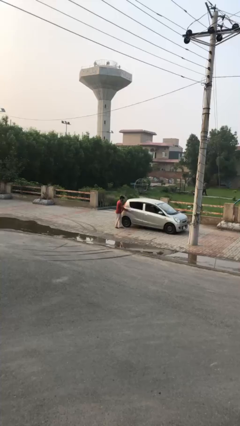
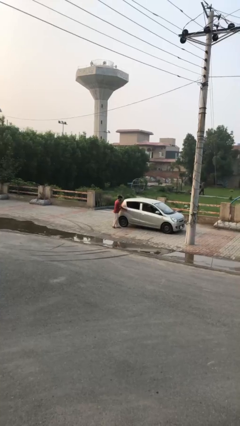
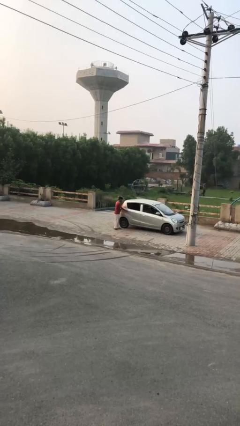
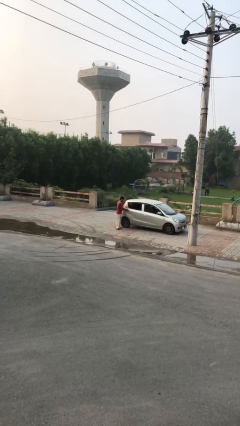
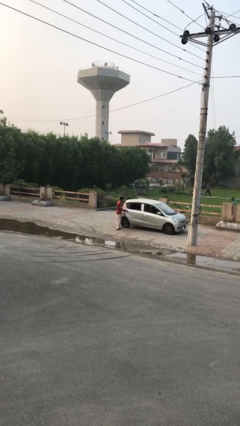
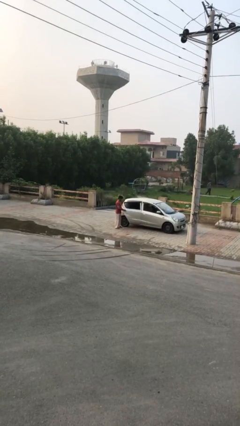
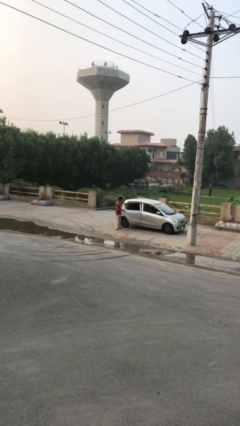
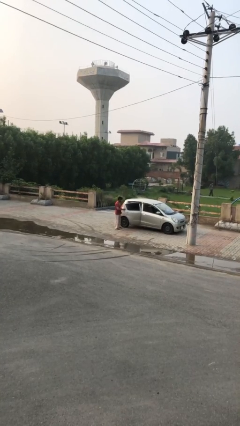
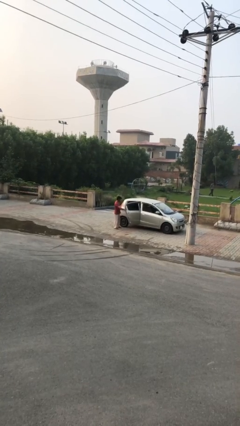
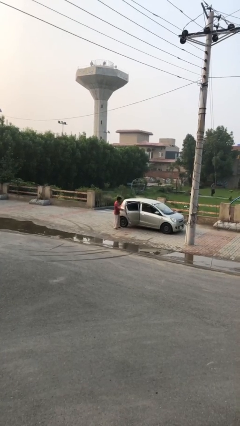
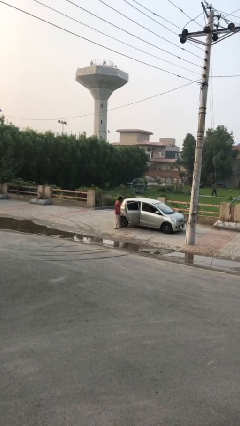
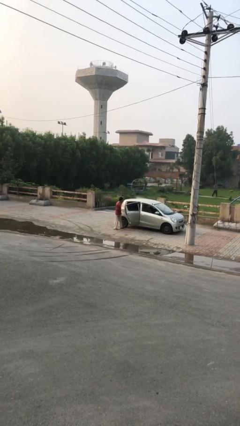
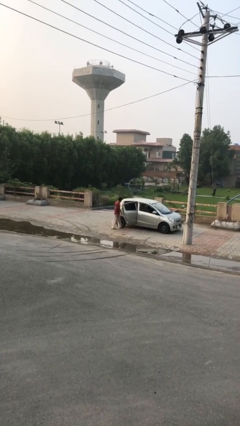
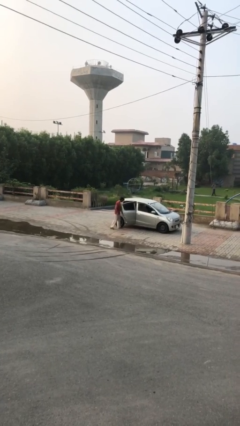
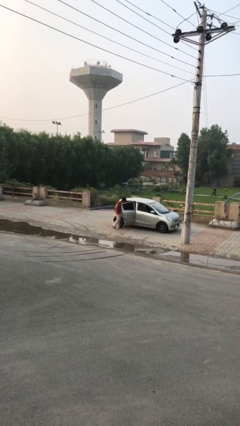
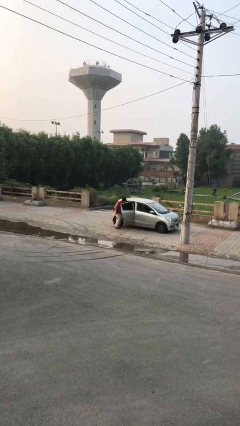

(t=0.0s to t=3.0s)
person opens car door

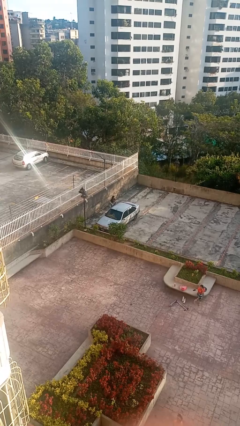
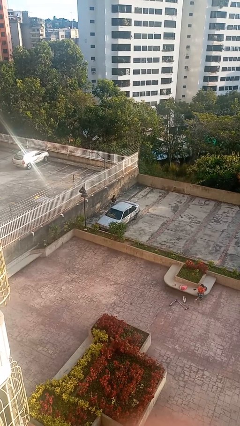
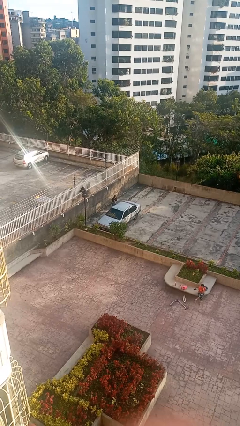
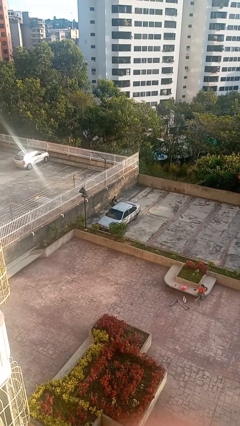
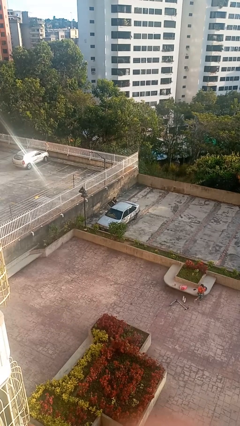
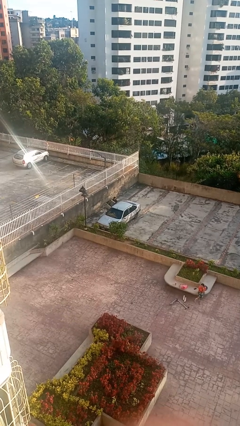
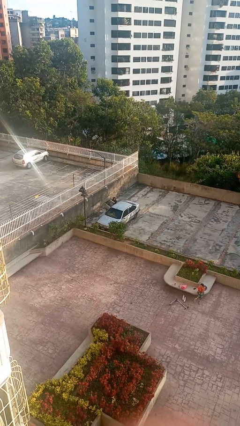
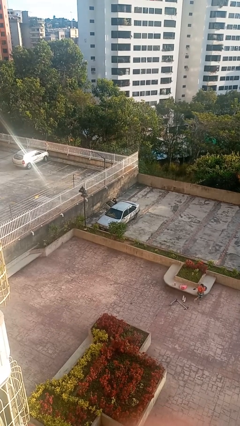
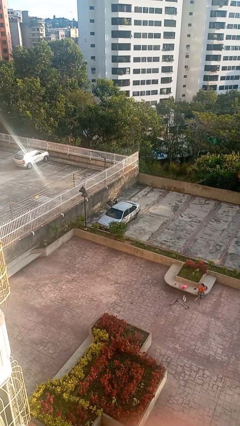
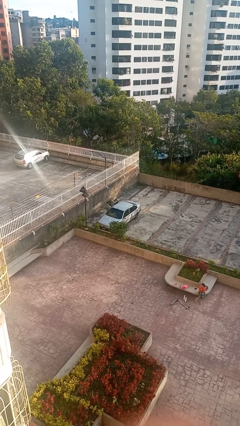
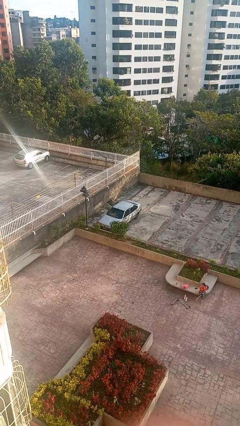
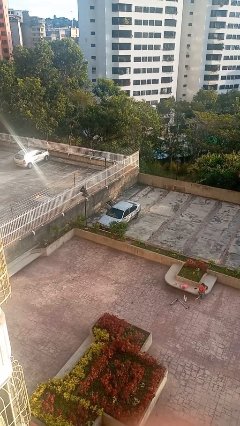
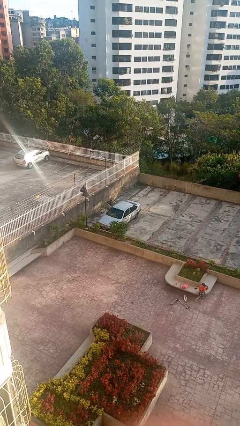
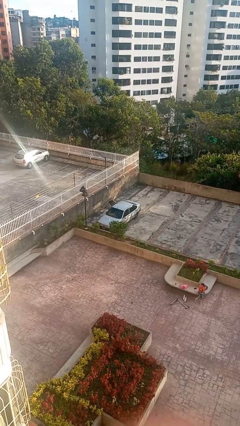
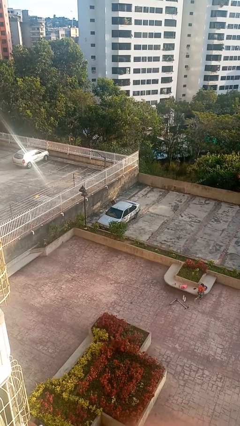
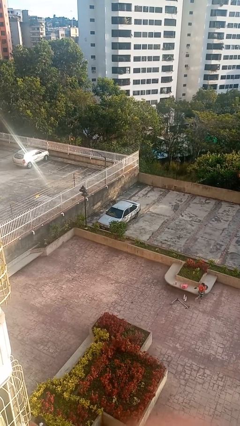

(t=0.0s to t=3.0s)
car picks up person

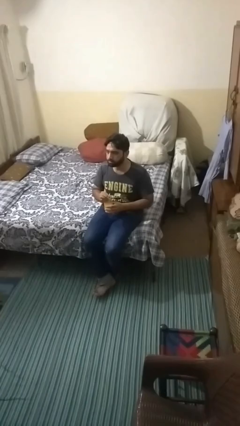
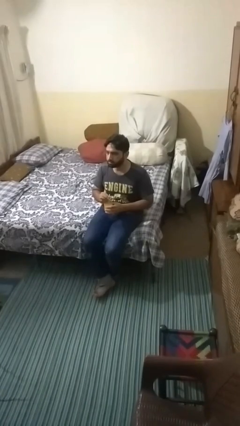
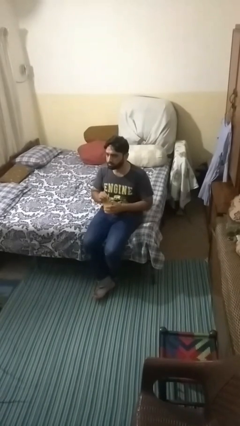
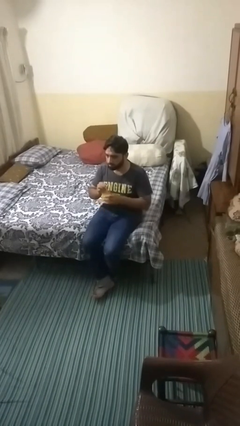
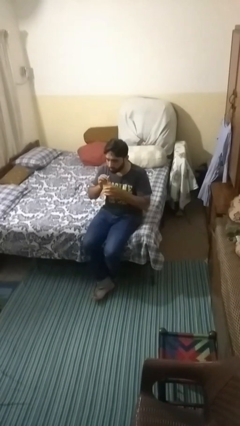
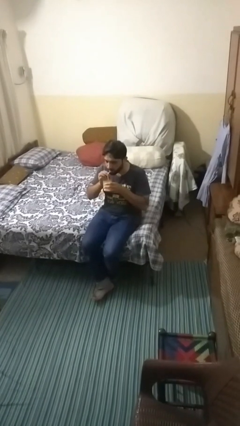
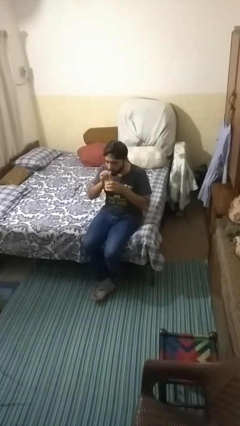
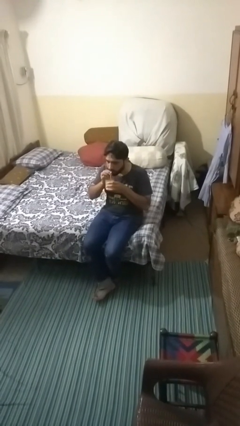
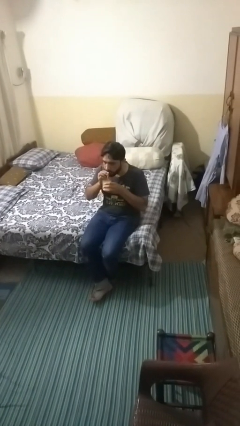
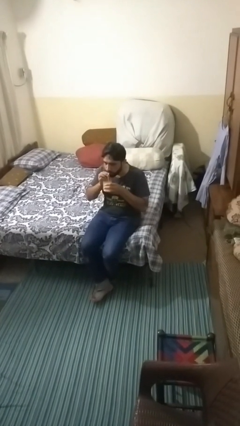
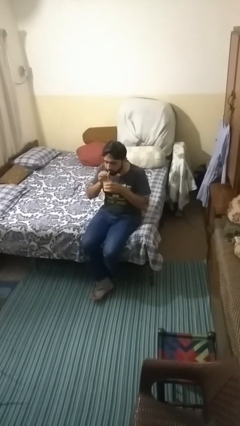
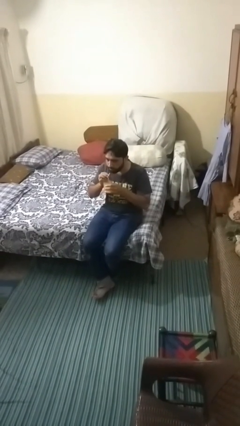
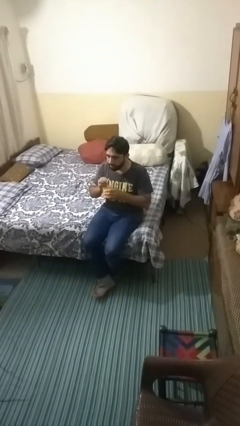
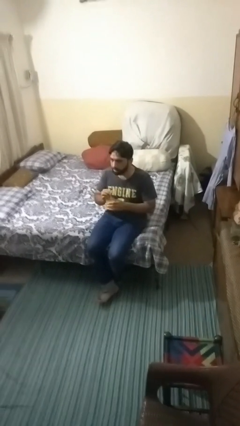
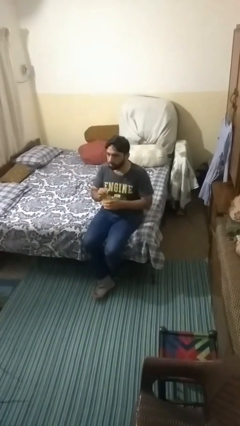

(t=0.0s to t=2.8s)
person drinks from straw

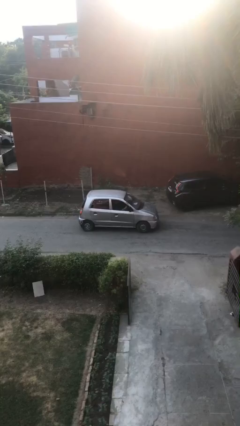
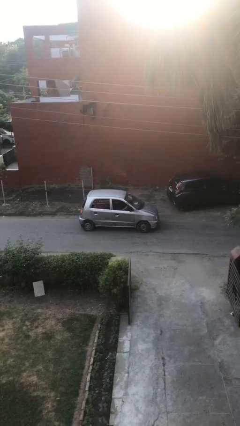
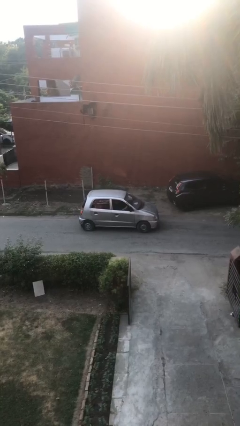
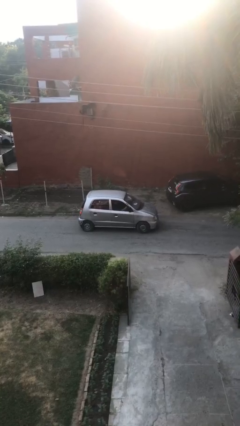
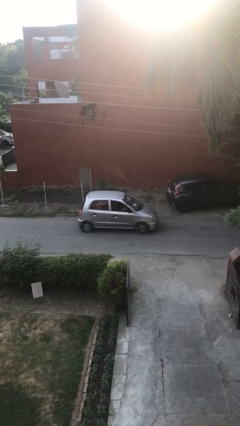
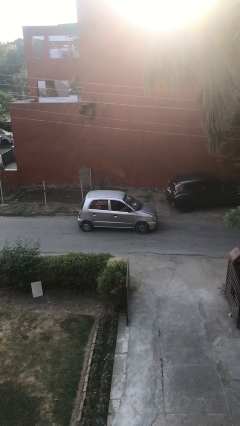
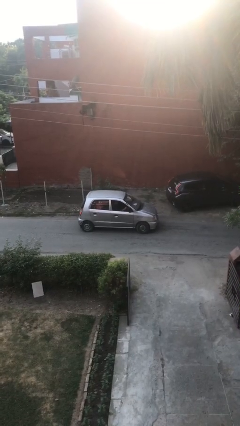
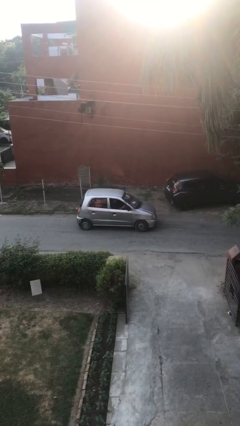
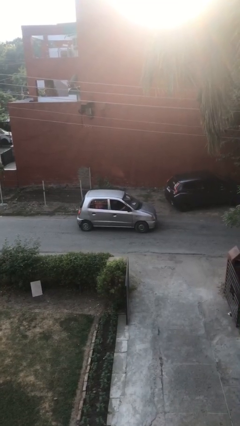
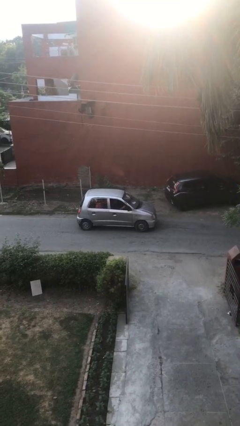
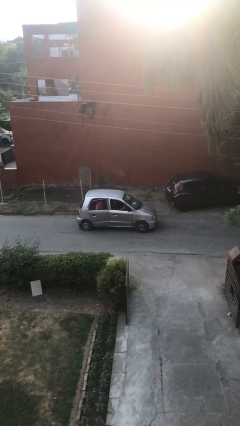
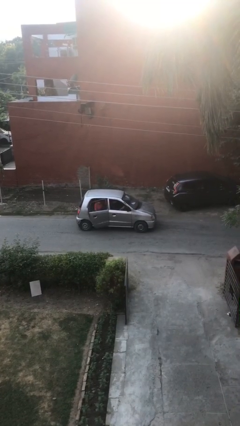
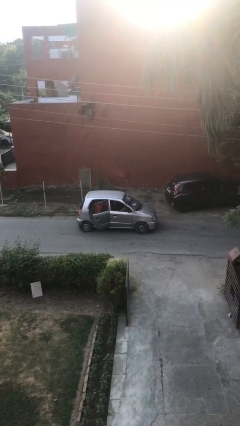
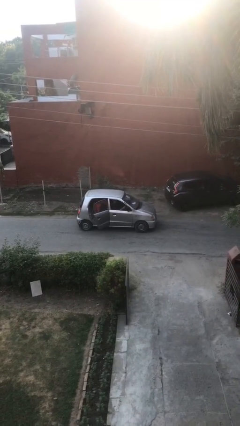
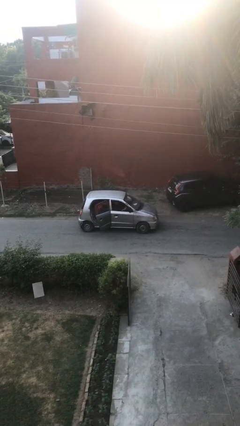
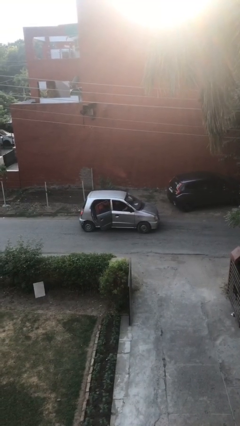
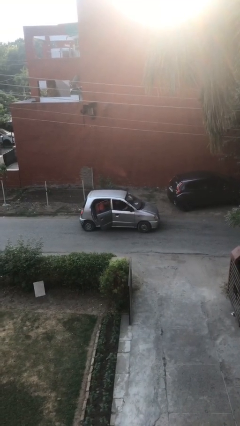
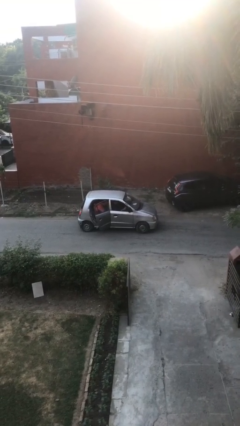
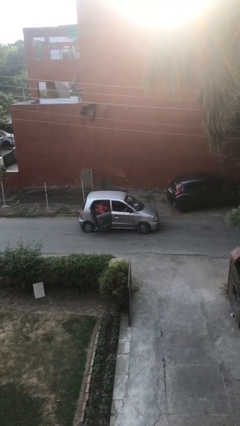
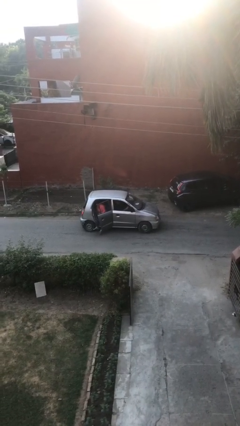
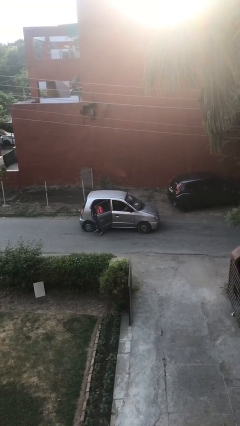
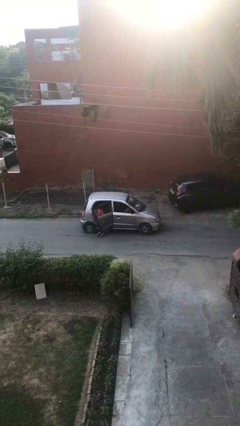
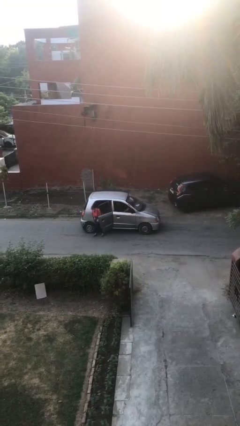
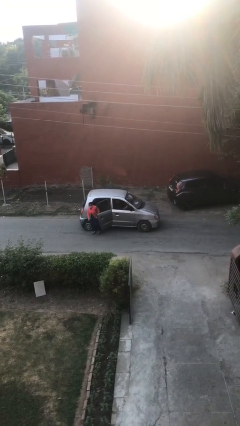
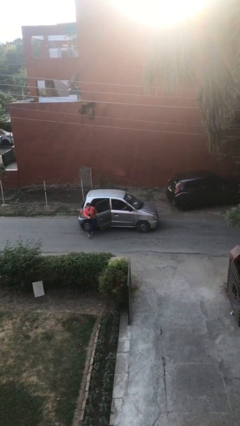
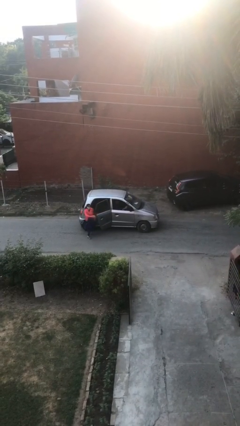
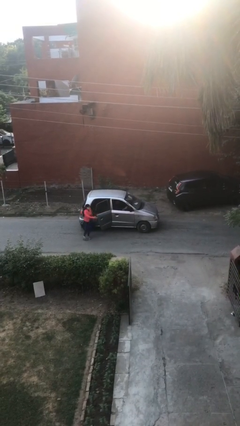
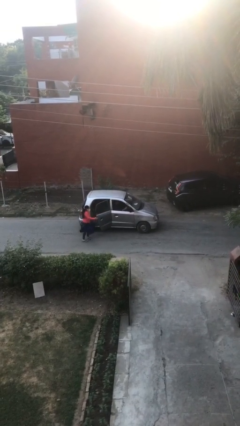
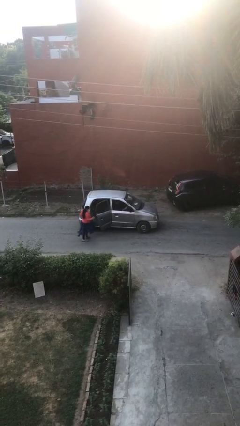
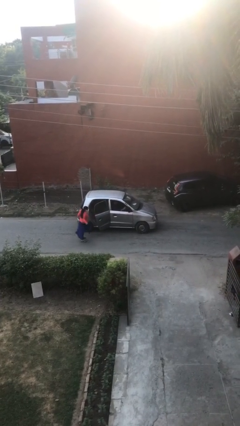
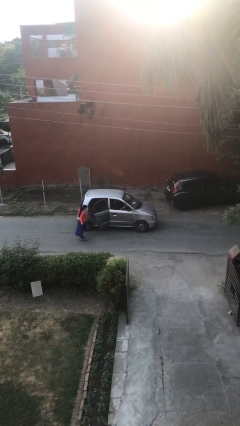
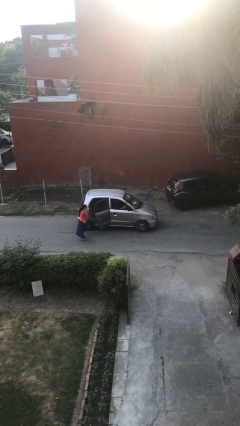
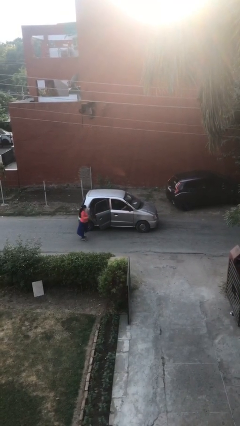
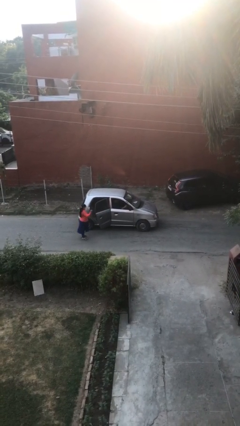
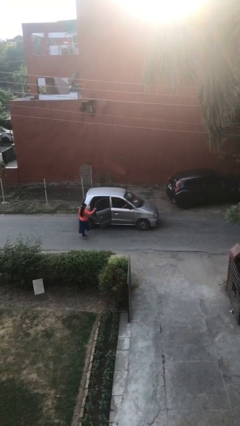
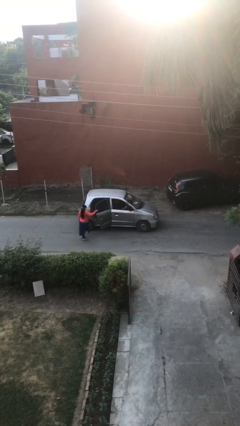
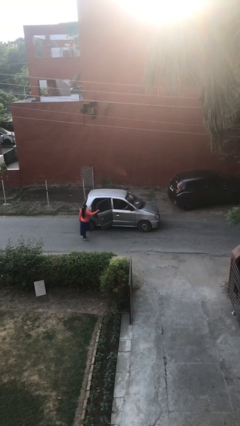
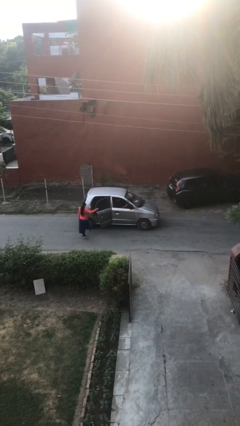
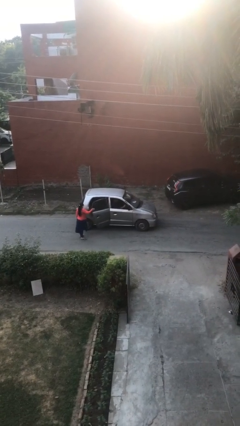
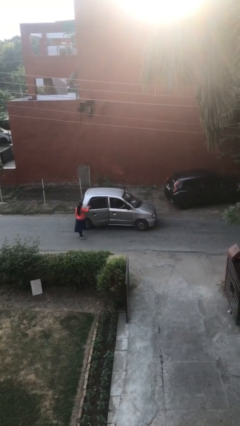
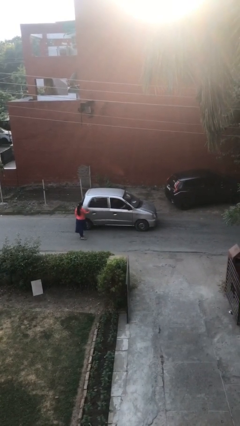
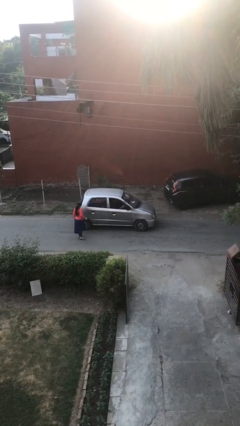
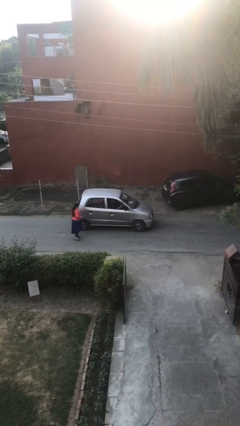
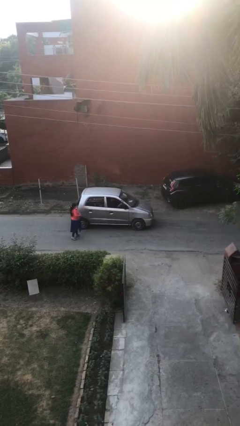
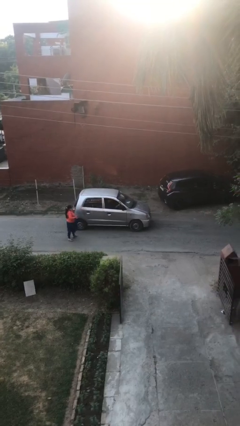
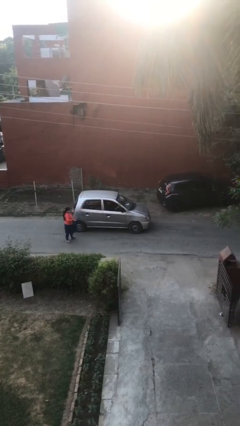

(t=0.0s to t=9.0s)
car drops off person
